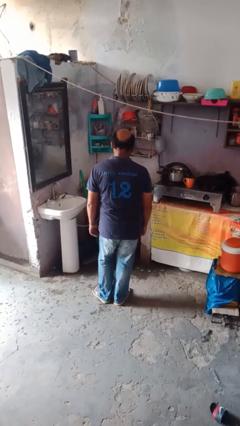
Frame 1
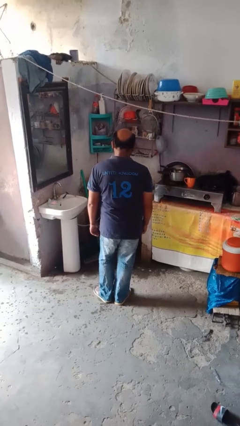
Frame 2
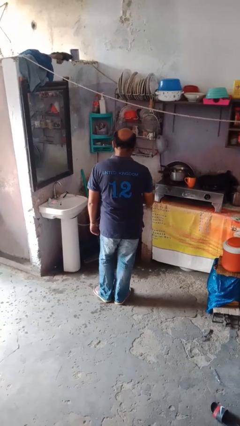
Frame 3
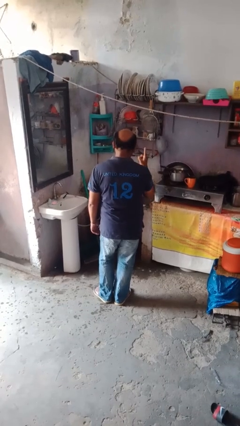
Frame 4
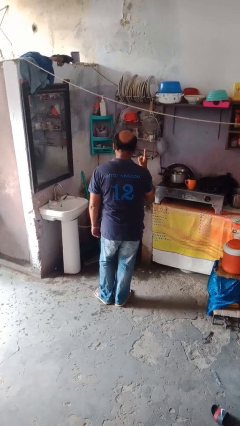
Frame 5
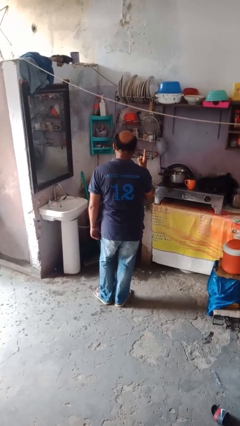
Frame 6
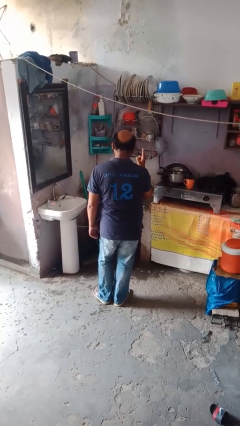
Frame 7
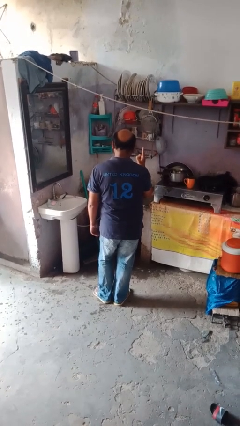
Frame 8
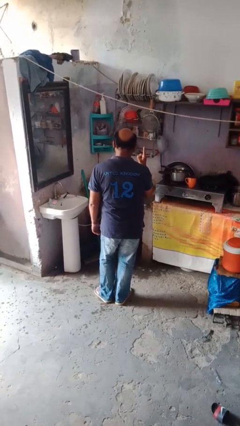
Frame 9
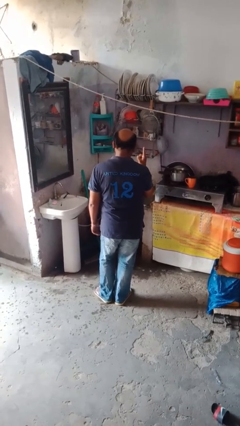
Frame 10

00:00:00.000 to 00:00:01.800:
person gestures number one

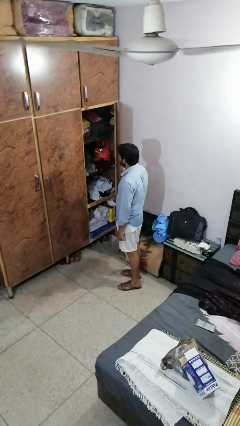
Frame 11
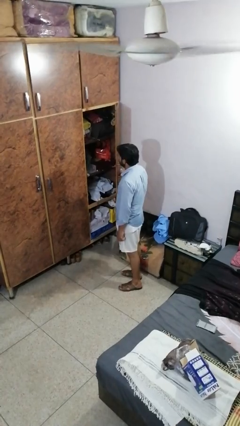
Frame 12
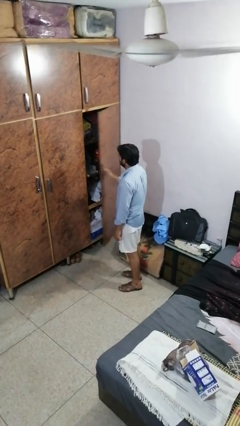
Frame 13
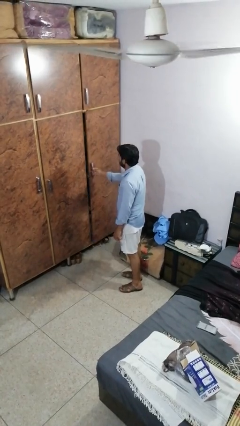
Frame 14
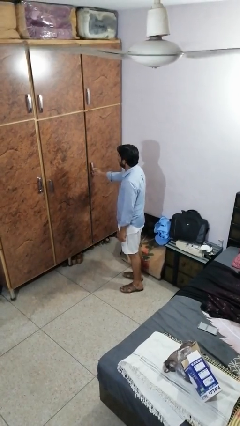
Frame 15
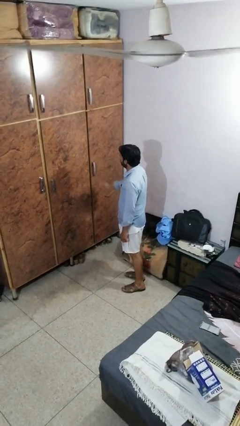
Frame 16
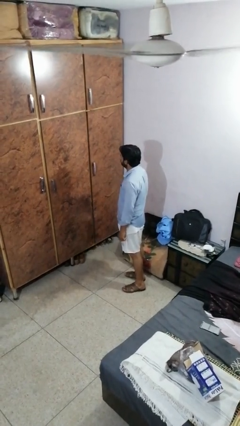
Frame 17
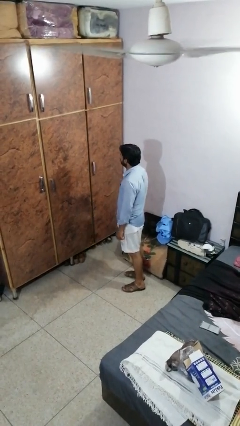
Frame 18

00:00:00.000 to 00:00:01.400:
person closes closet door

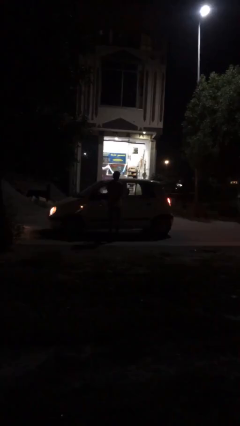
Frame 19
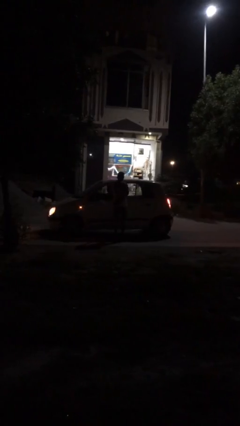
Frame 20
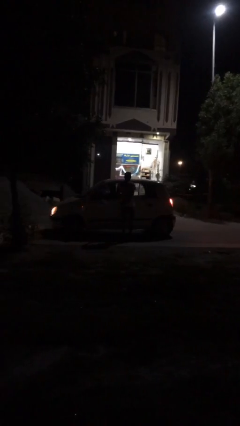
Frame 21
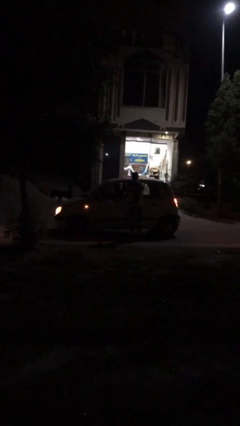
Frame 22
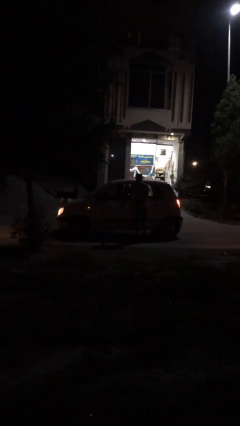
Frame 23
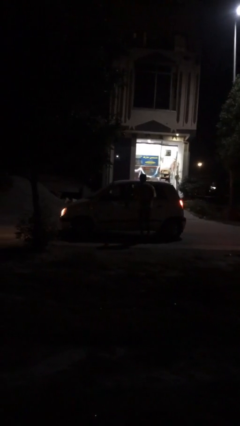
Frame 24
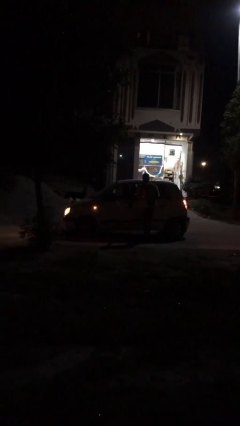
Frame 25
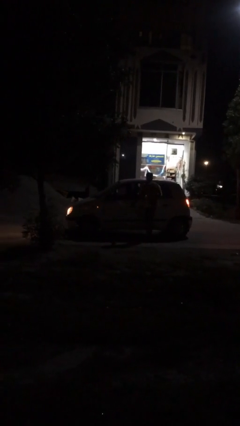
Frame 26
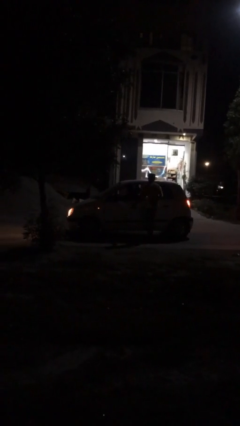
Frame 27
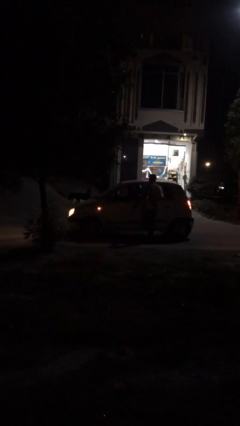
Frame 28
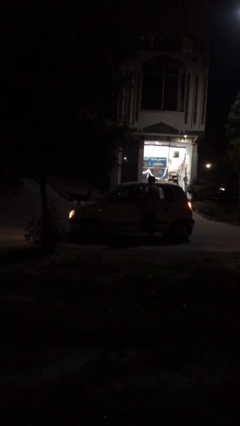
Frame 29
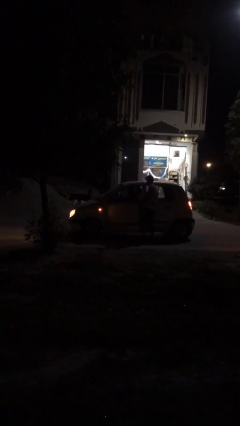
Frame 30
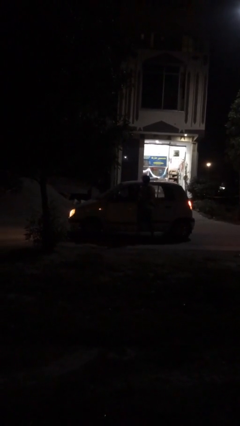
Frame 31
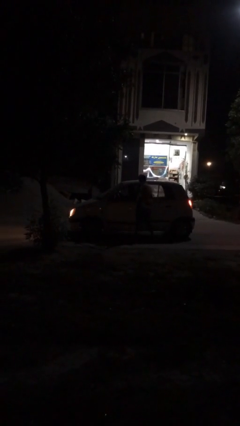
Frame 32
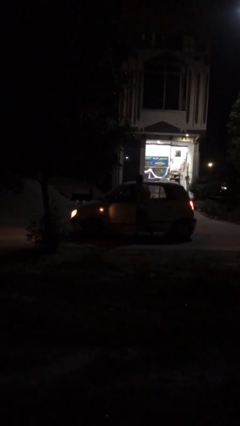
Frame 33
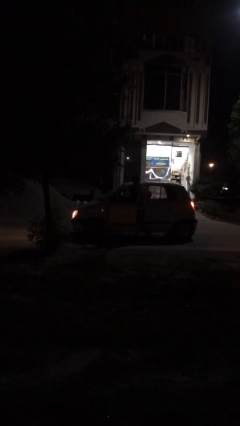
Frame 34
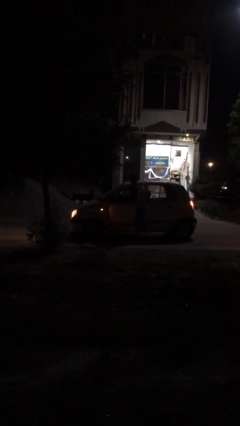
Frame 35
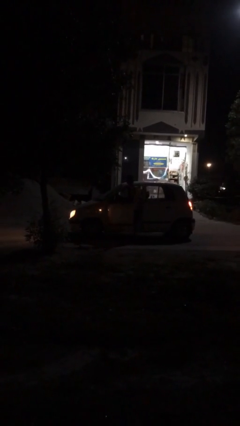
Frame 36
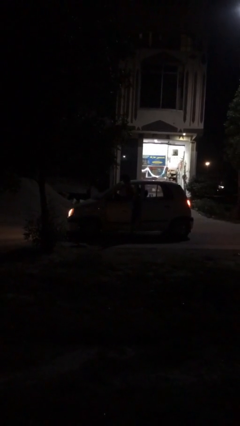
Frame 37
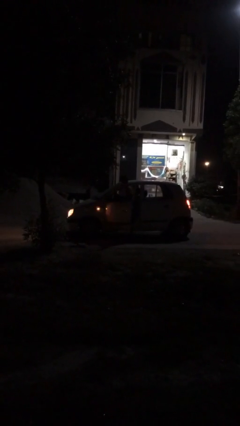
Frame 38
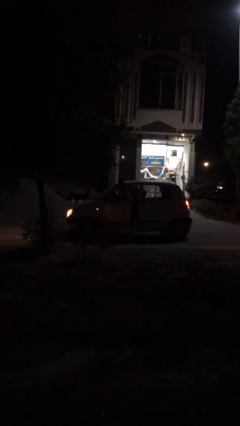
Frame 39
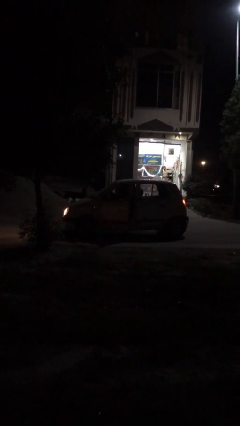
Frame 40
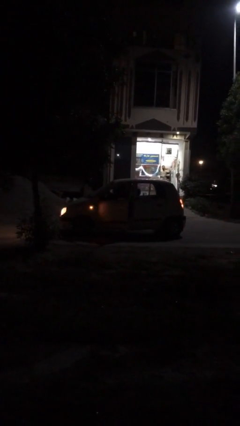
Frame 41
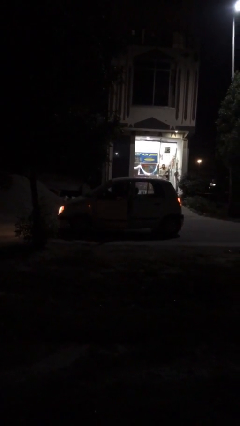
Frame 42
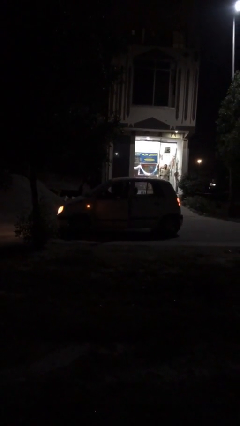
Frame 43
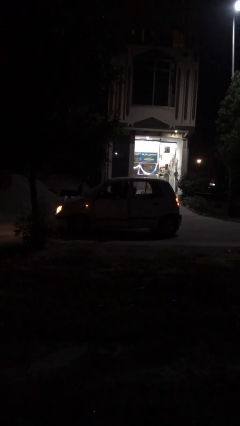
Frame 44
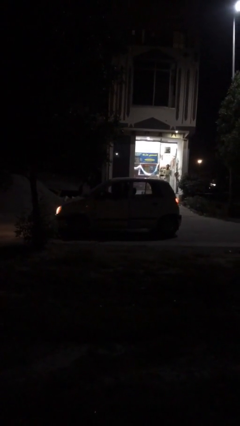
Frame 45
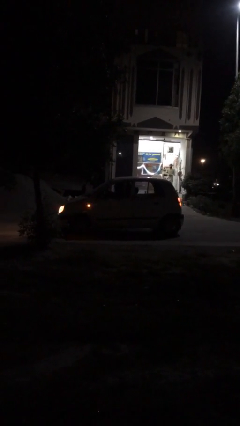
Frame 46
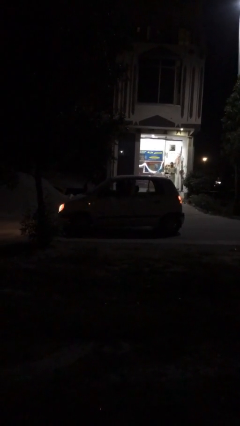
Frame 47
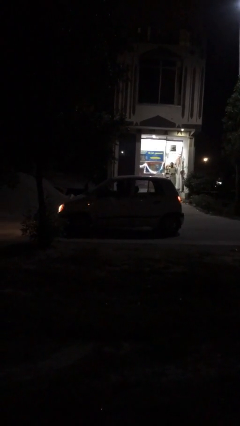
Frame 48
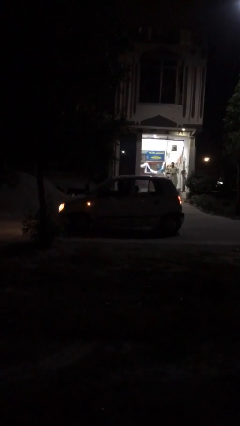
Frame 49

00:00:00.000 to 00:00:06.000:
car picks up person

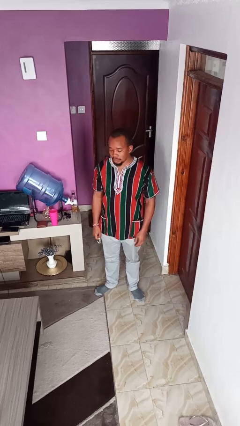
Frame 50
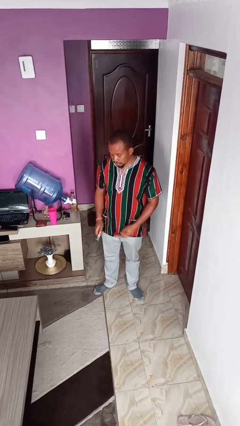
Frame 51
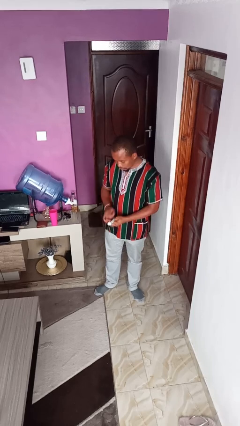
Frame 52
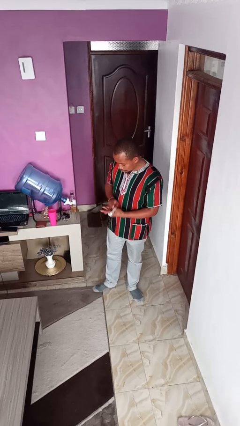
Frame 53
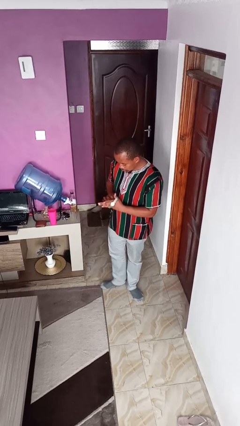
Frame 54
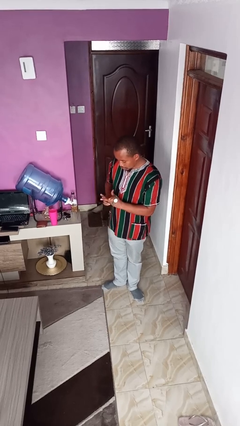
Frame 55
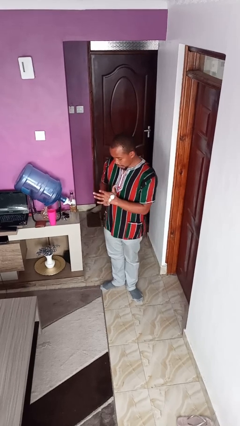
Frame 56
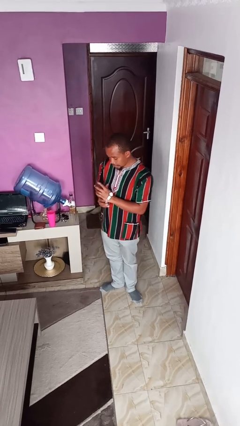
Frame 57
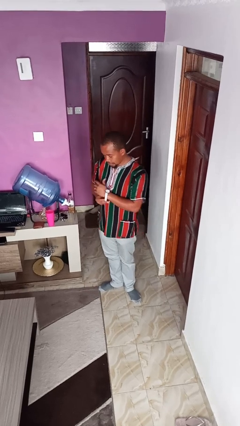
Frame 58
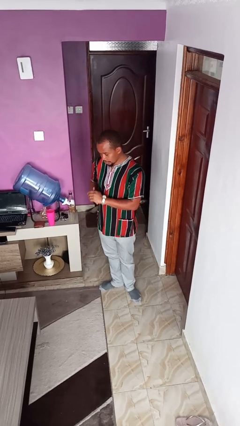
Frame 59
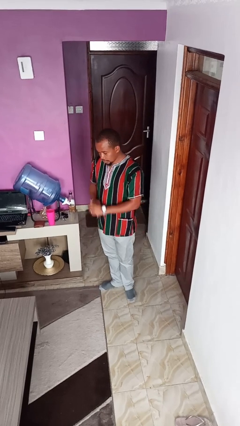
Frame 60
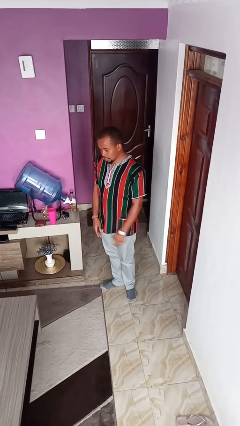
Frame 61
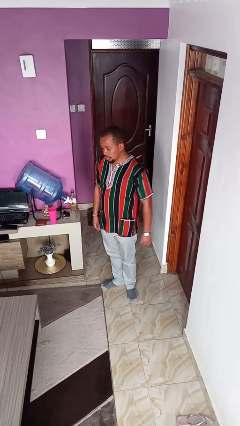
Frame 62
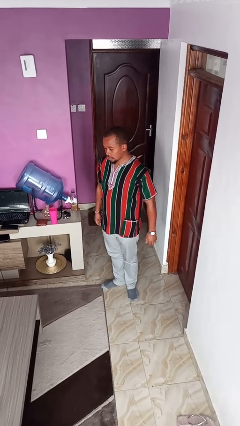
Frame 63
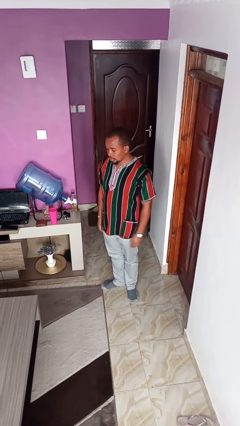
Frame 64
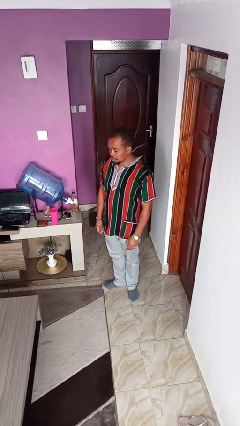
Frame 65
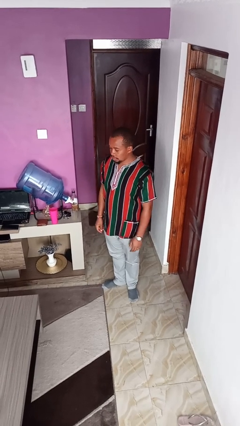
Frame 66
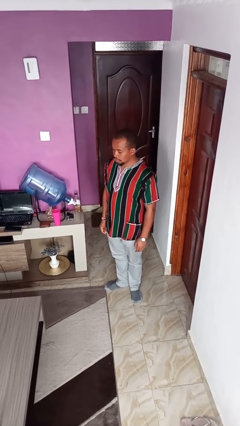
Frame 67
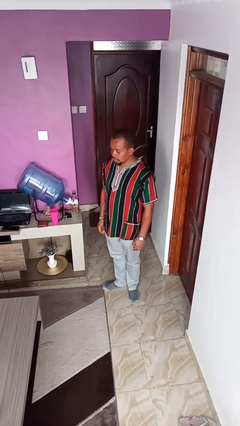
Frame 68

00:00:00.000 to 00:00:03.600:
person puts on wristwatch

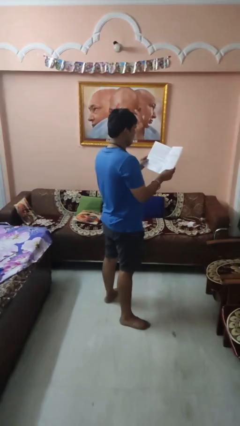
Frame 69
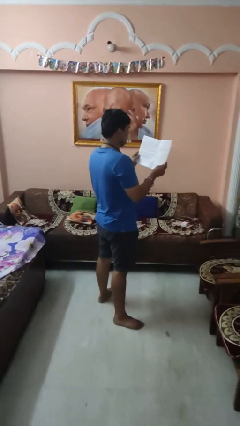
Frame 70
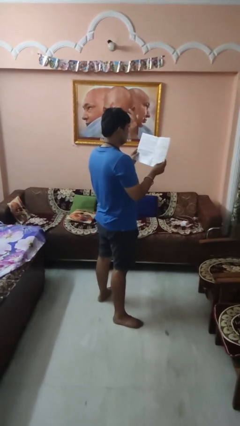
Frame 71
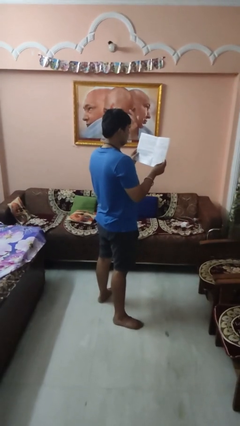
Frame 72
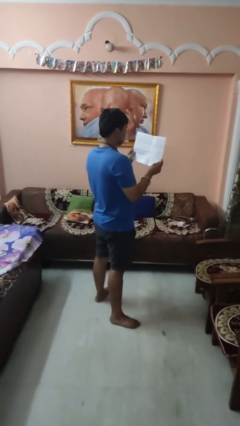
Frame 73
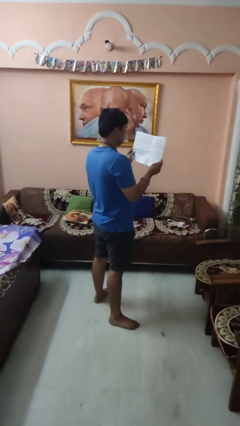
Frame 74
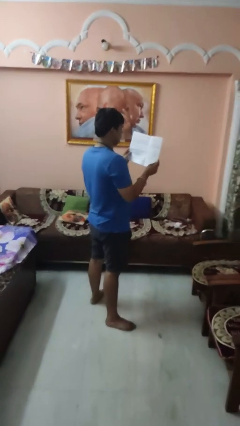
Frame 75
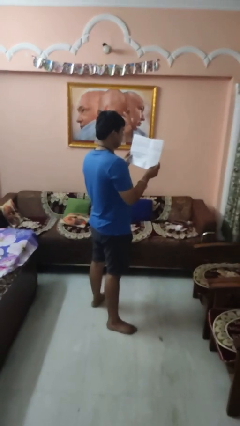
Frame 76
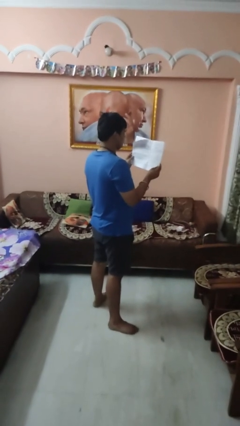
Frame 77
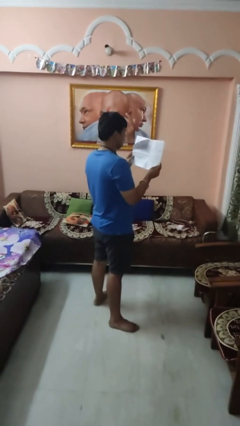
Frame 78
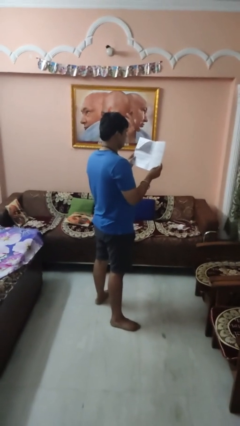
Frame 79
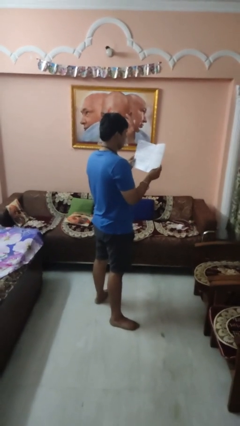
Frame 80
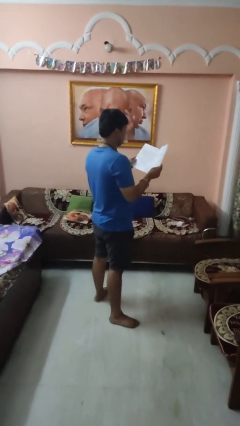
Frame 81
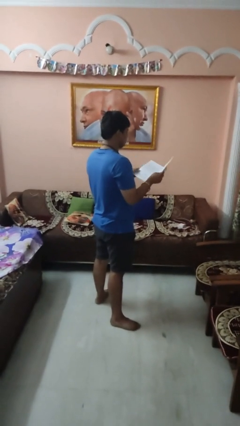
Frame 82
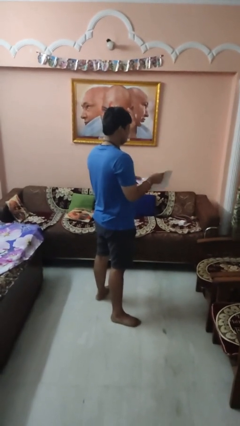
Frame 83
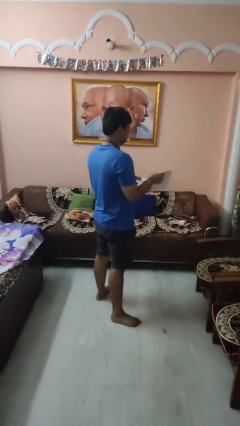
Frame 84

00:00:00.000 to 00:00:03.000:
person reads magazine

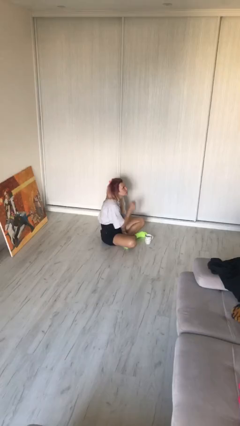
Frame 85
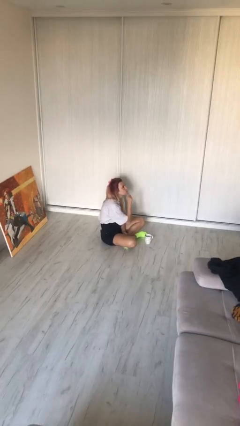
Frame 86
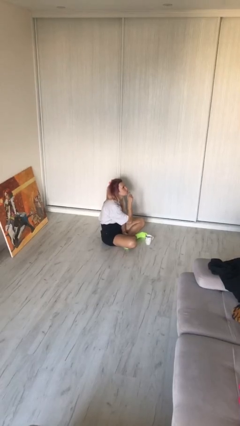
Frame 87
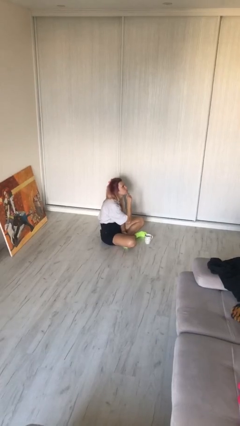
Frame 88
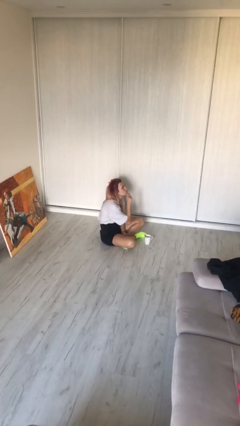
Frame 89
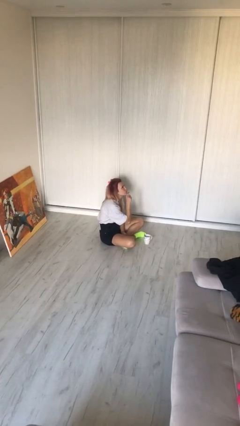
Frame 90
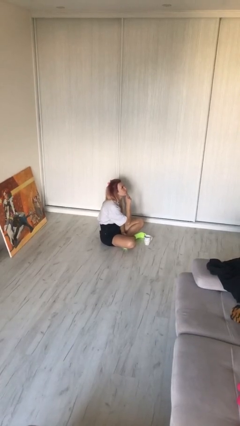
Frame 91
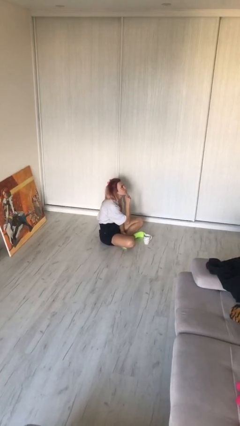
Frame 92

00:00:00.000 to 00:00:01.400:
person strokes chin
